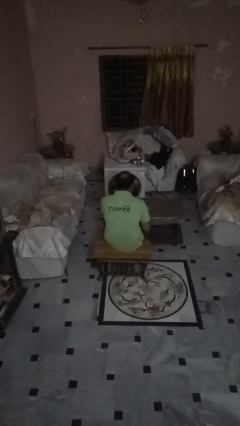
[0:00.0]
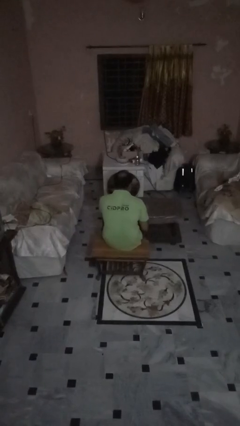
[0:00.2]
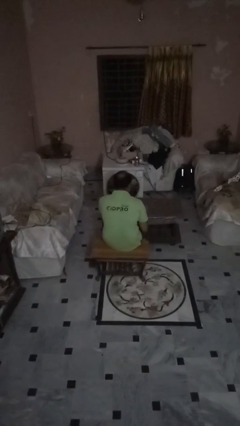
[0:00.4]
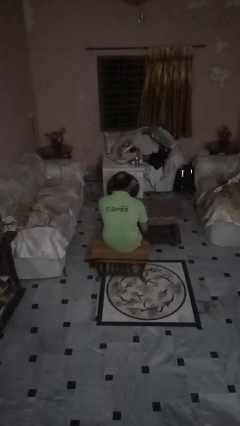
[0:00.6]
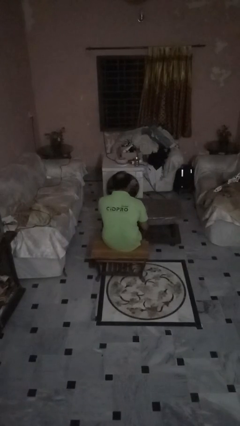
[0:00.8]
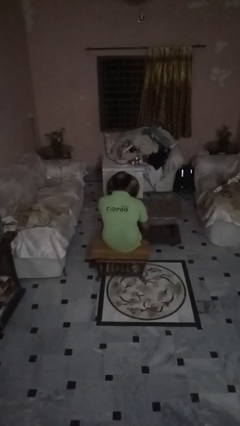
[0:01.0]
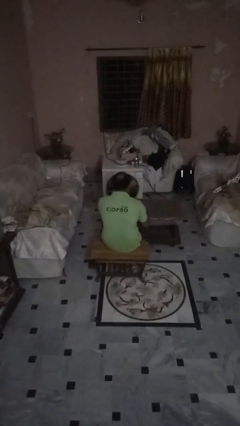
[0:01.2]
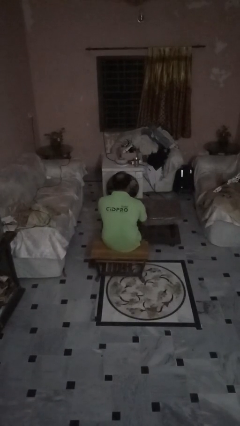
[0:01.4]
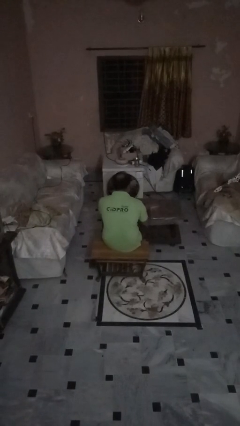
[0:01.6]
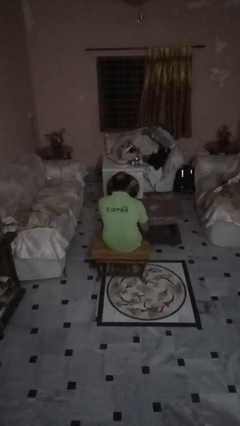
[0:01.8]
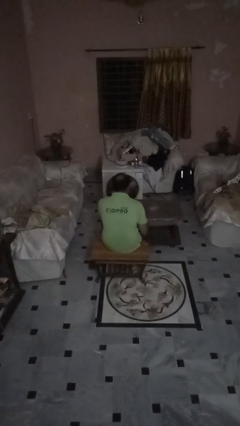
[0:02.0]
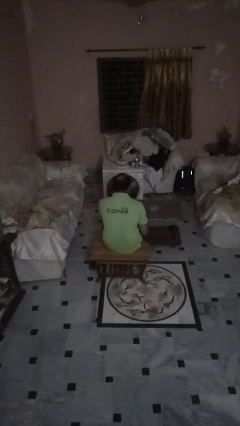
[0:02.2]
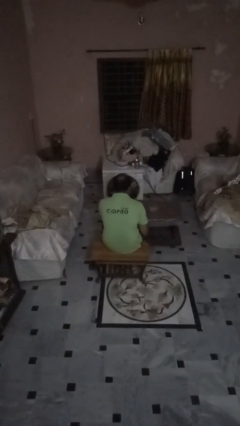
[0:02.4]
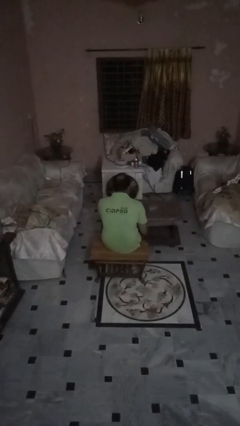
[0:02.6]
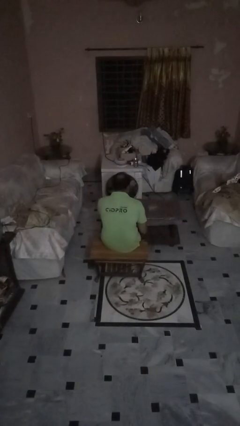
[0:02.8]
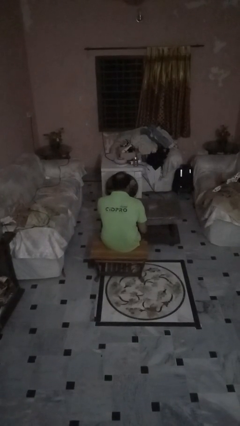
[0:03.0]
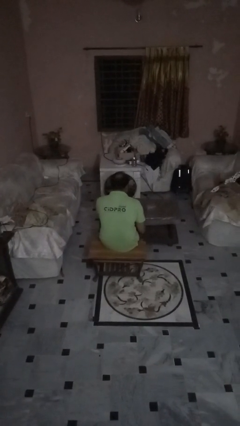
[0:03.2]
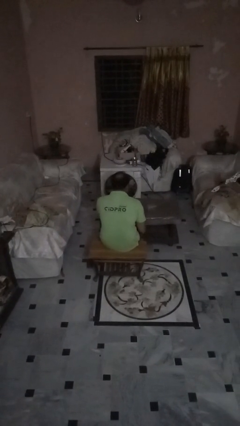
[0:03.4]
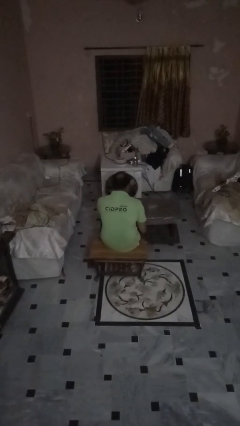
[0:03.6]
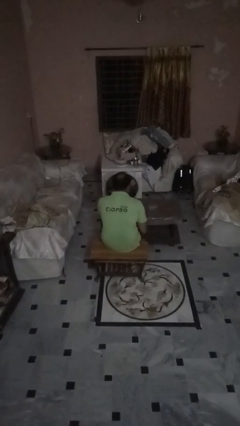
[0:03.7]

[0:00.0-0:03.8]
person knocks over glass

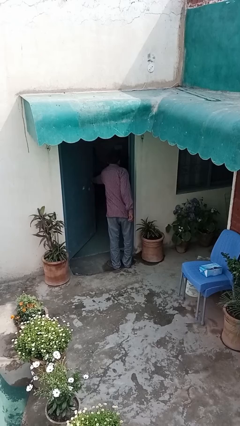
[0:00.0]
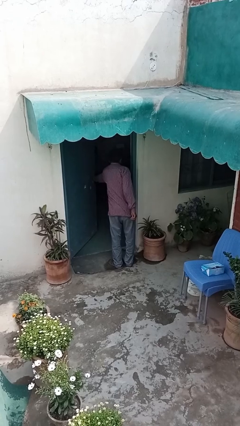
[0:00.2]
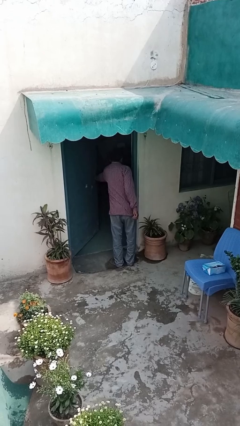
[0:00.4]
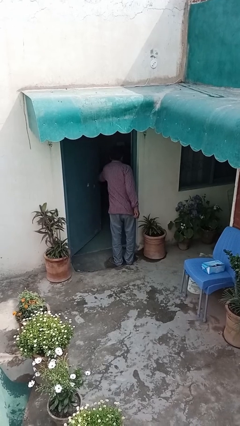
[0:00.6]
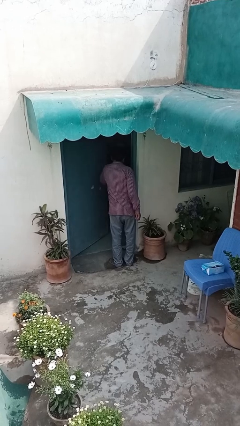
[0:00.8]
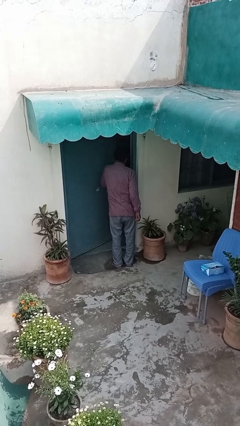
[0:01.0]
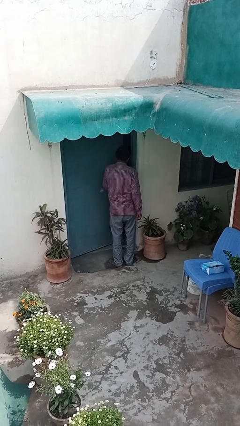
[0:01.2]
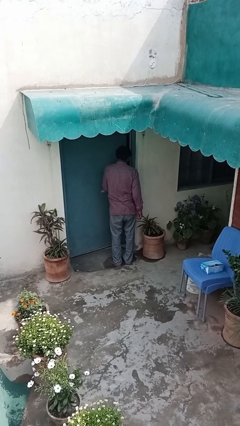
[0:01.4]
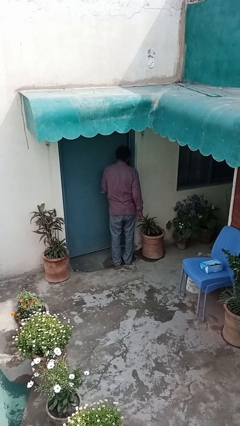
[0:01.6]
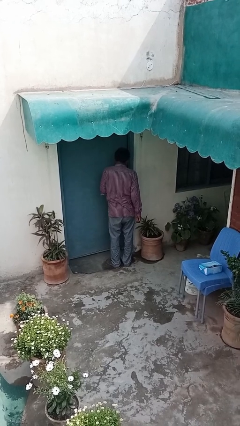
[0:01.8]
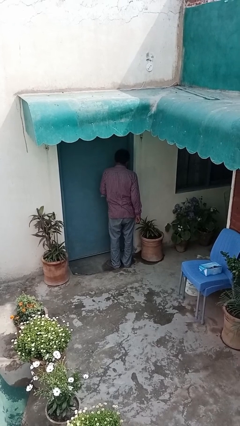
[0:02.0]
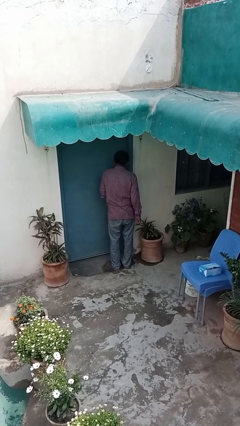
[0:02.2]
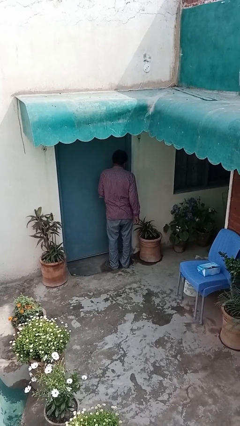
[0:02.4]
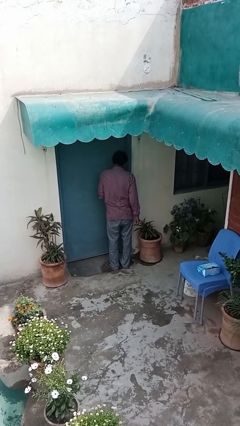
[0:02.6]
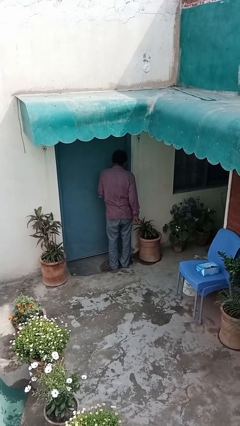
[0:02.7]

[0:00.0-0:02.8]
person closes facility door

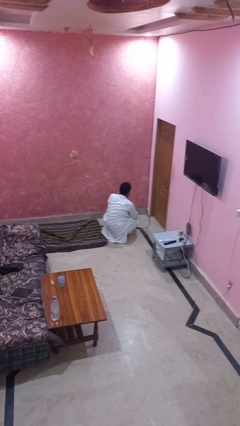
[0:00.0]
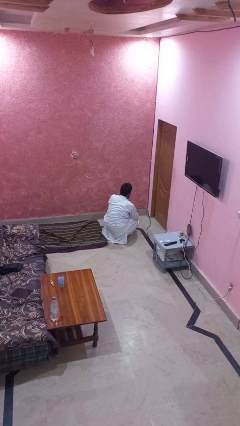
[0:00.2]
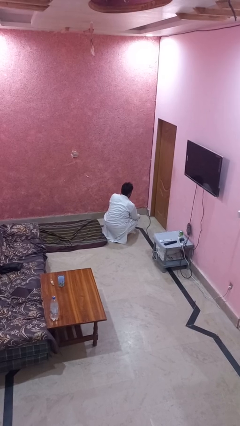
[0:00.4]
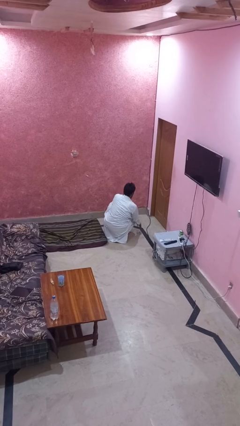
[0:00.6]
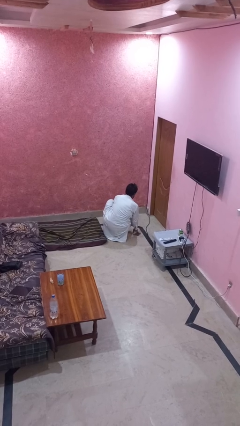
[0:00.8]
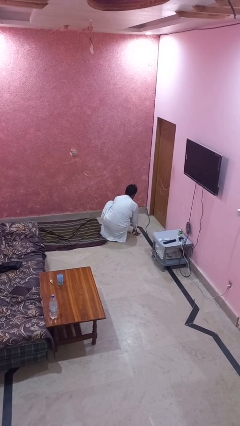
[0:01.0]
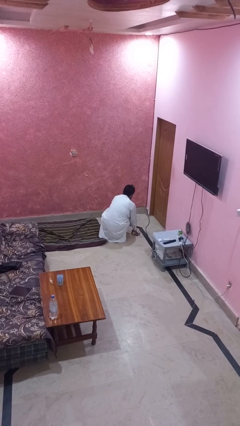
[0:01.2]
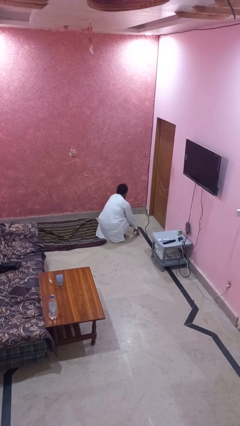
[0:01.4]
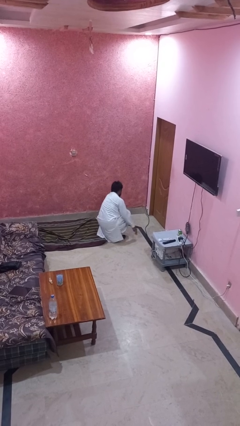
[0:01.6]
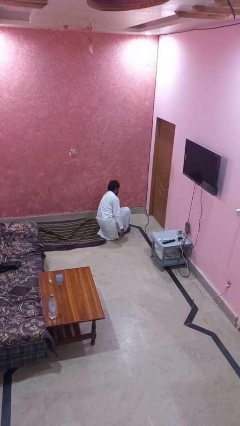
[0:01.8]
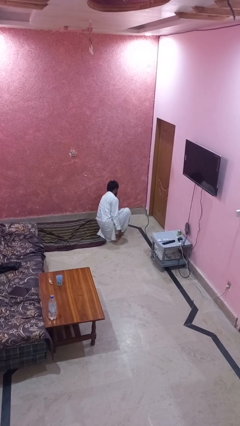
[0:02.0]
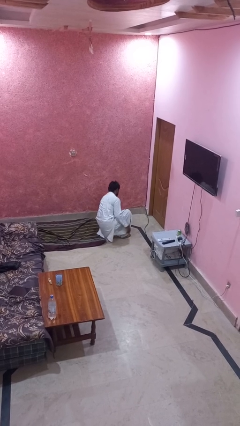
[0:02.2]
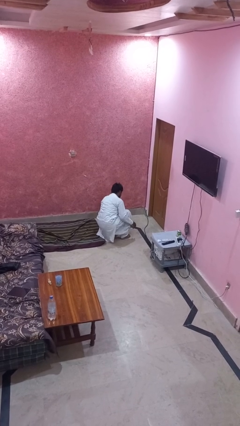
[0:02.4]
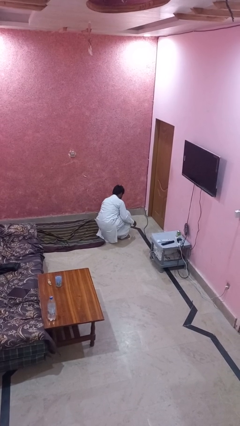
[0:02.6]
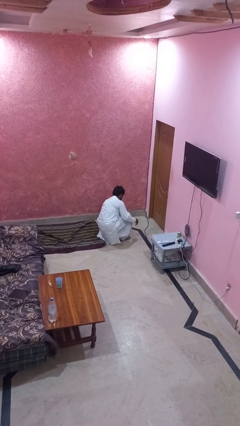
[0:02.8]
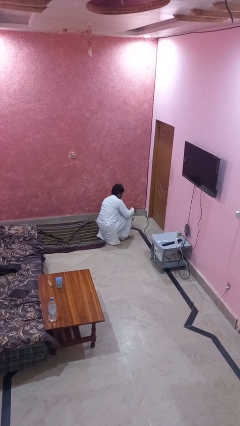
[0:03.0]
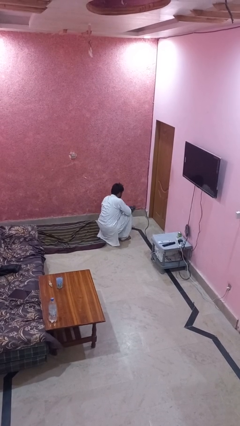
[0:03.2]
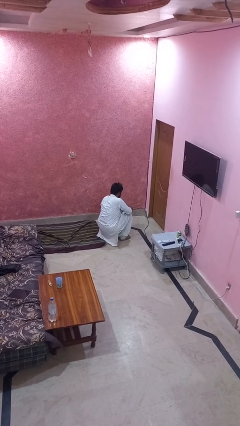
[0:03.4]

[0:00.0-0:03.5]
person takes off shoes

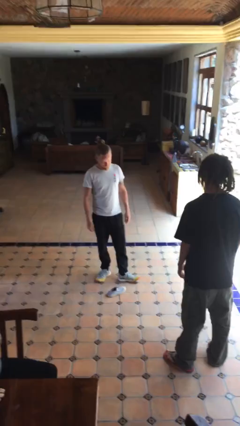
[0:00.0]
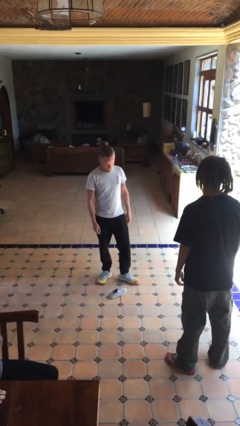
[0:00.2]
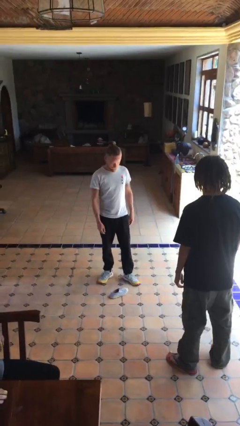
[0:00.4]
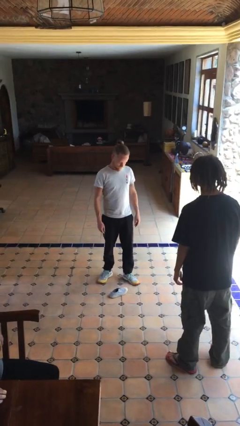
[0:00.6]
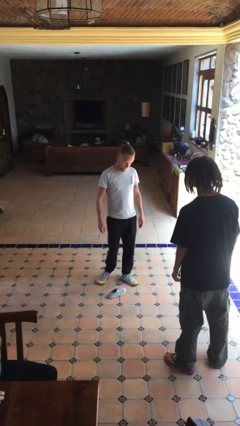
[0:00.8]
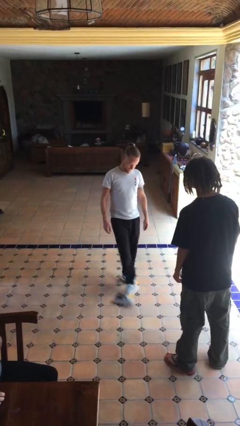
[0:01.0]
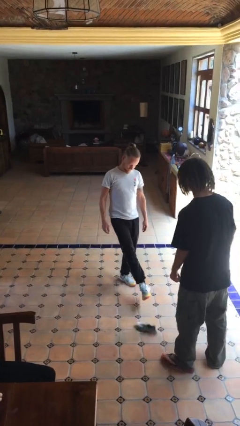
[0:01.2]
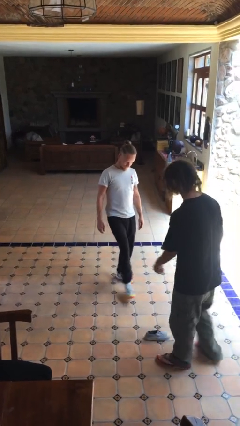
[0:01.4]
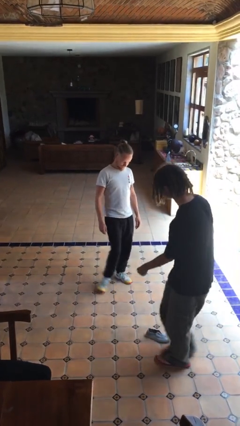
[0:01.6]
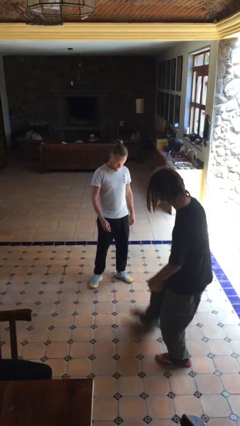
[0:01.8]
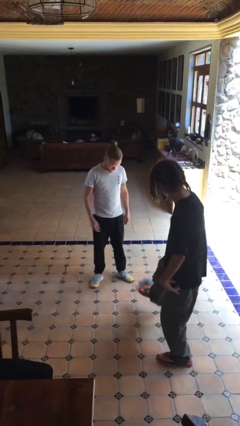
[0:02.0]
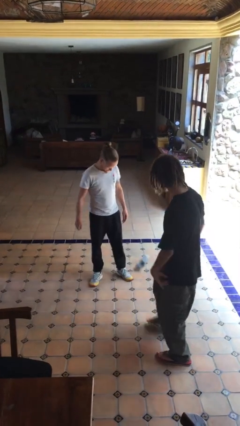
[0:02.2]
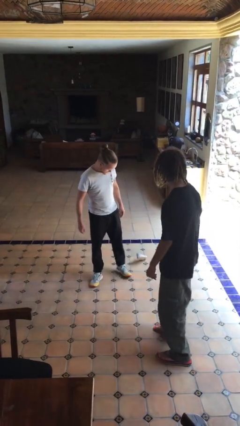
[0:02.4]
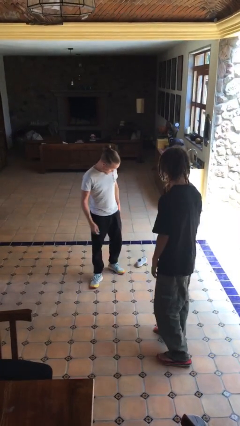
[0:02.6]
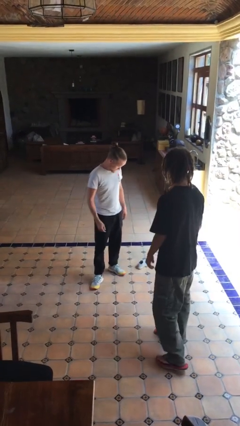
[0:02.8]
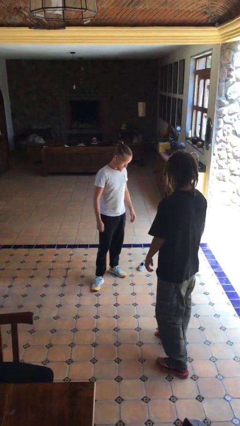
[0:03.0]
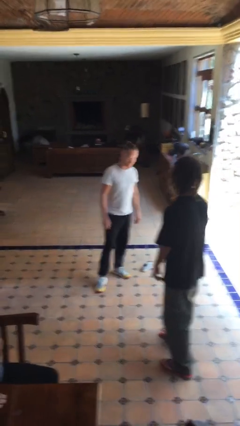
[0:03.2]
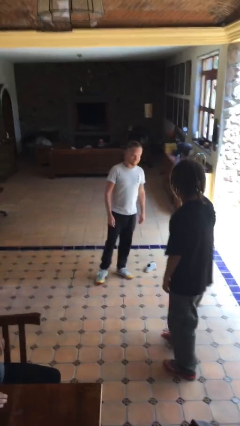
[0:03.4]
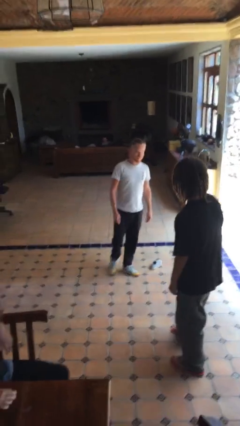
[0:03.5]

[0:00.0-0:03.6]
person kicks object to person

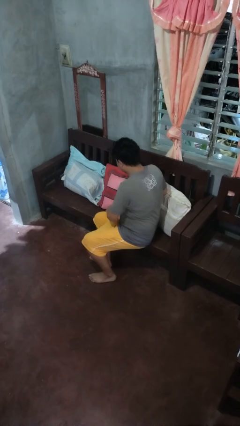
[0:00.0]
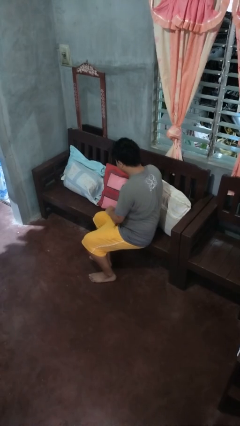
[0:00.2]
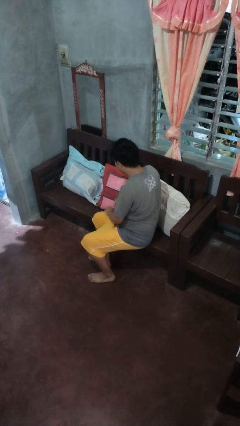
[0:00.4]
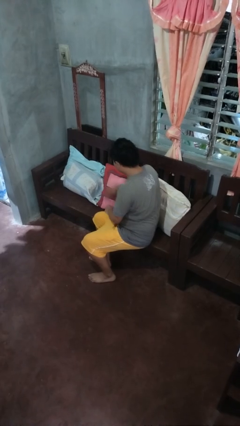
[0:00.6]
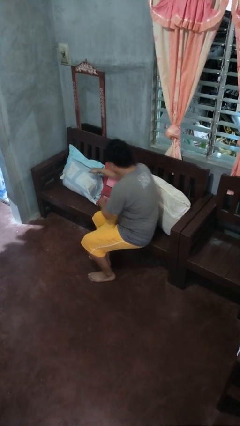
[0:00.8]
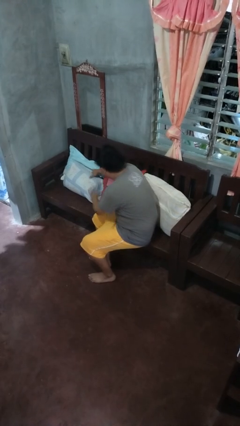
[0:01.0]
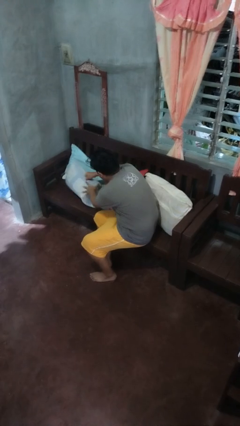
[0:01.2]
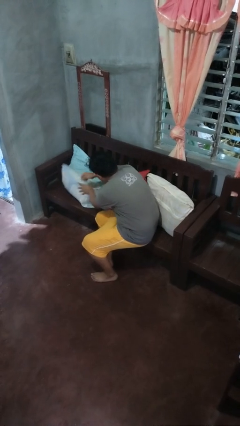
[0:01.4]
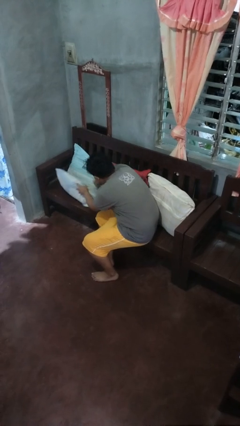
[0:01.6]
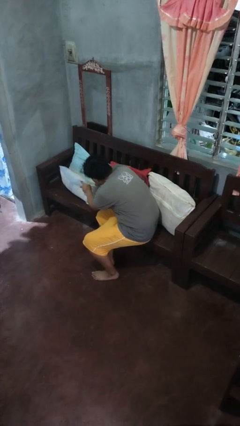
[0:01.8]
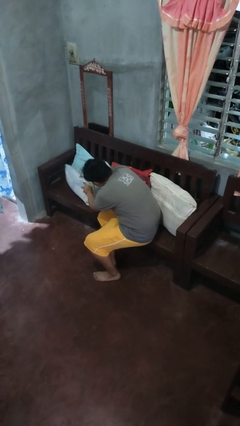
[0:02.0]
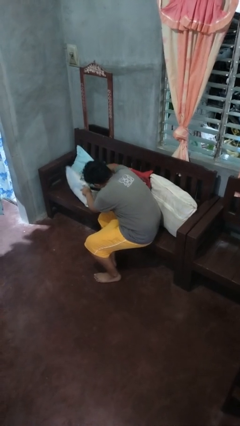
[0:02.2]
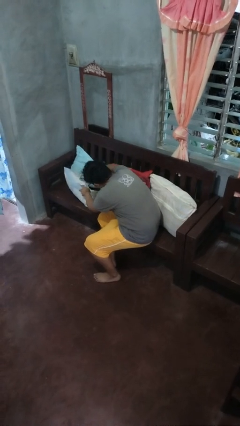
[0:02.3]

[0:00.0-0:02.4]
person searches in couch

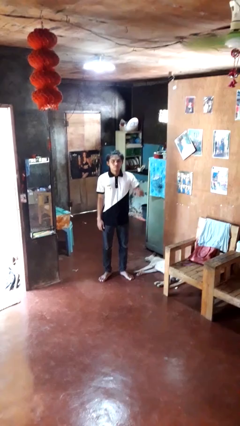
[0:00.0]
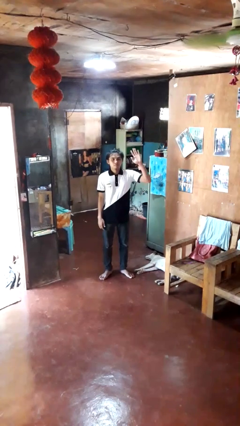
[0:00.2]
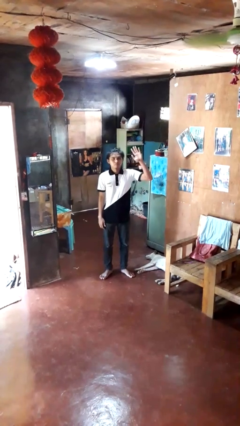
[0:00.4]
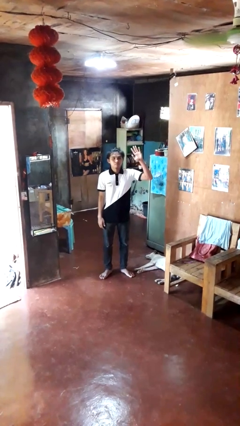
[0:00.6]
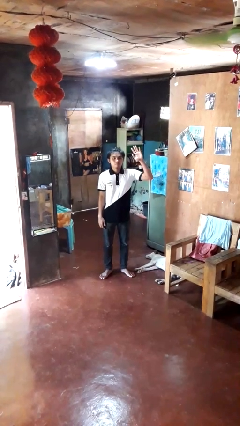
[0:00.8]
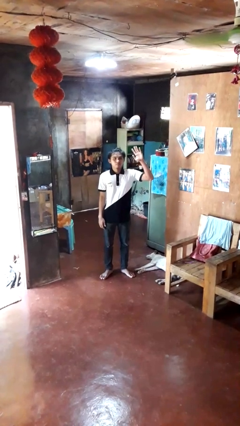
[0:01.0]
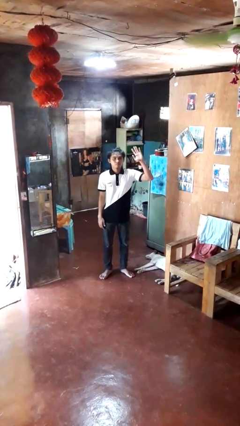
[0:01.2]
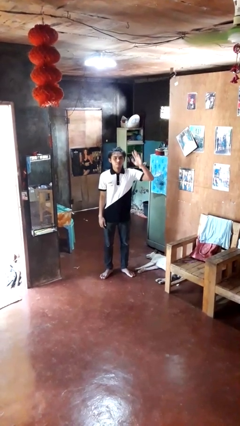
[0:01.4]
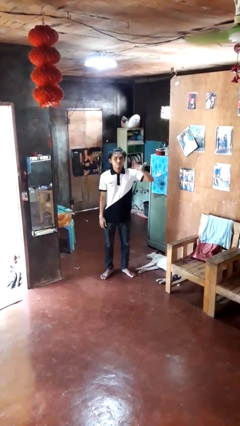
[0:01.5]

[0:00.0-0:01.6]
person gestures raise hand
